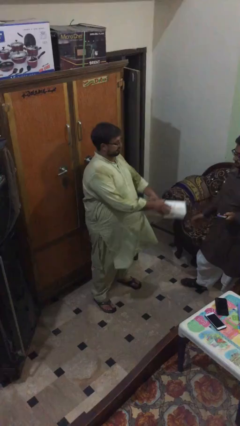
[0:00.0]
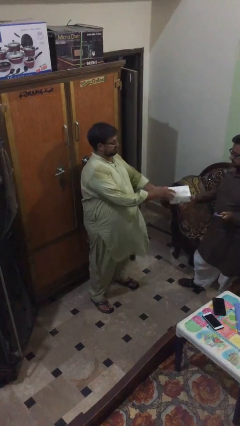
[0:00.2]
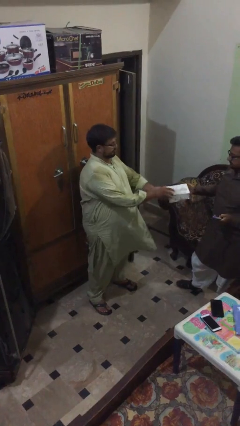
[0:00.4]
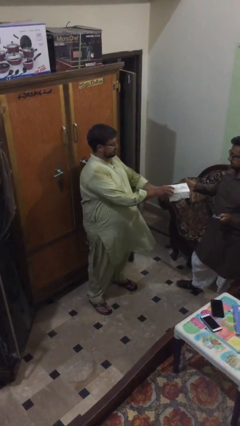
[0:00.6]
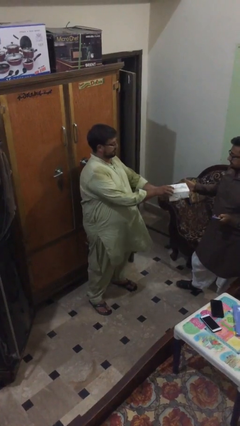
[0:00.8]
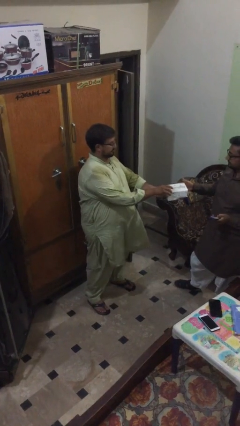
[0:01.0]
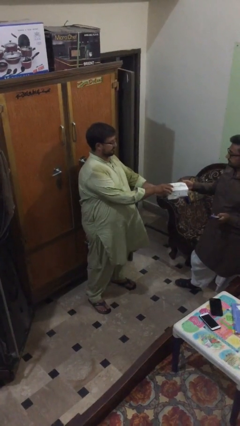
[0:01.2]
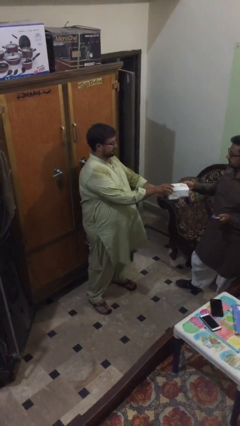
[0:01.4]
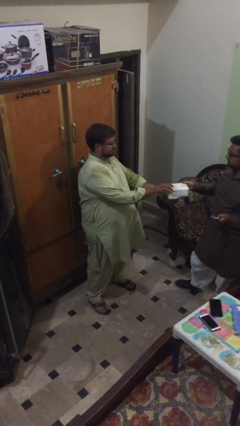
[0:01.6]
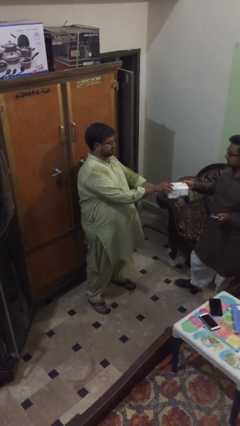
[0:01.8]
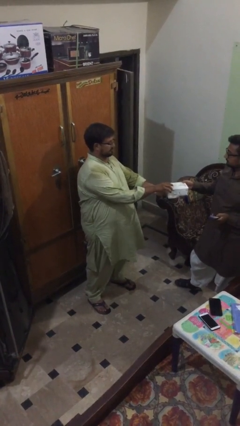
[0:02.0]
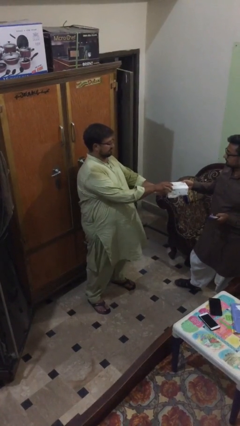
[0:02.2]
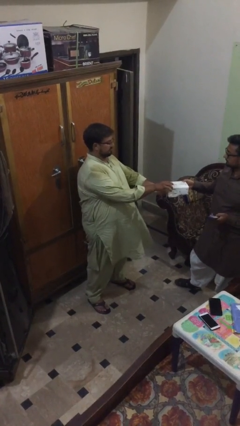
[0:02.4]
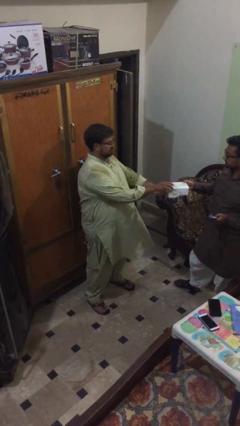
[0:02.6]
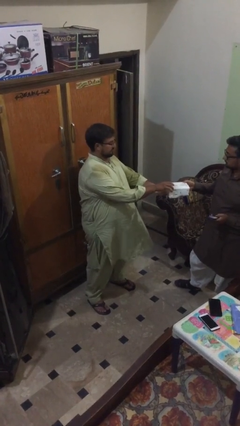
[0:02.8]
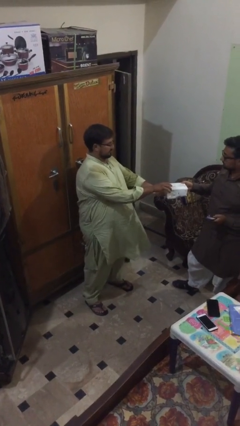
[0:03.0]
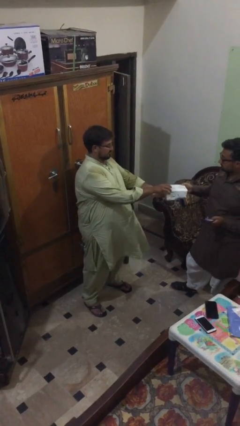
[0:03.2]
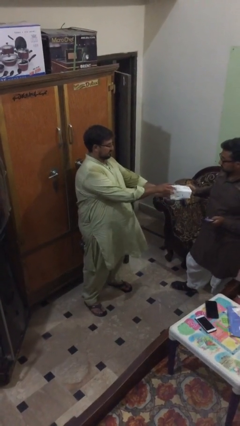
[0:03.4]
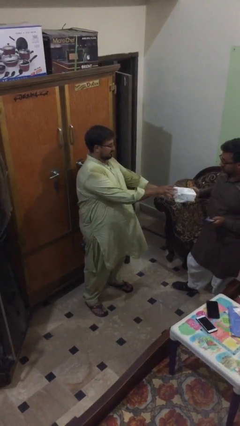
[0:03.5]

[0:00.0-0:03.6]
person transfers object to person

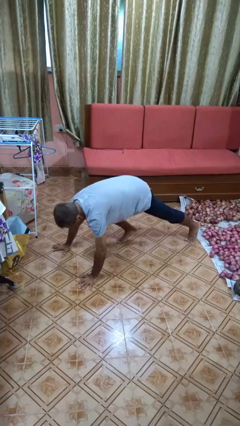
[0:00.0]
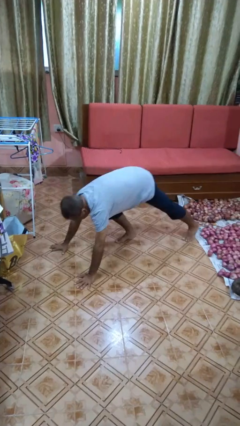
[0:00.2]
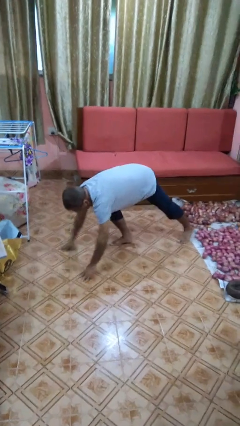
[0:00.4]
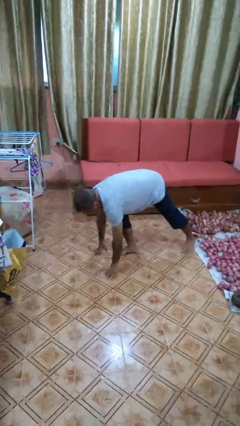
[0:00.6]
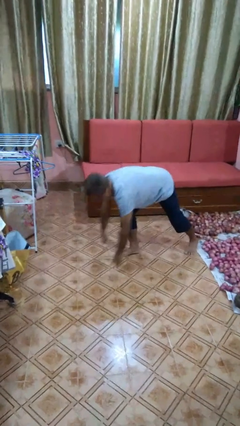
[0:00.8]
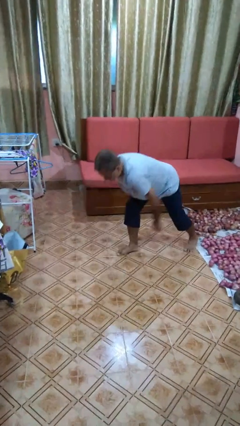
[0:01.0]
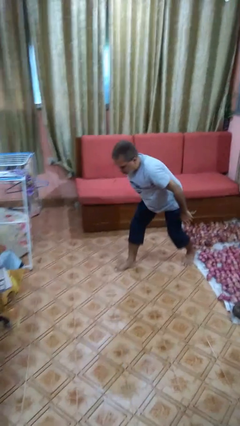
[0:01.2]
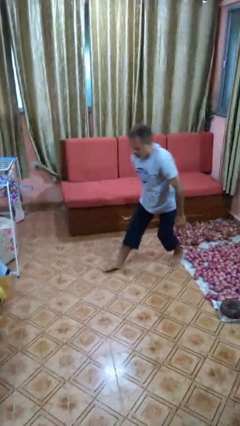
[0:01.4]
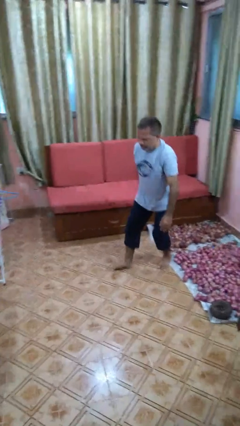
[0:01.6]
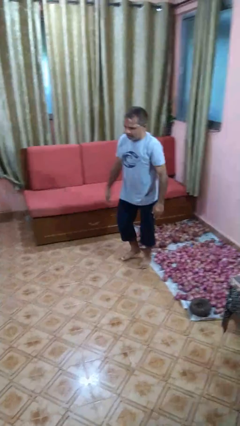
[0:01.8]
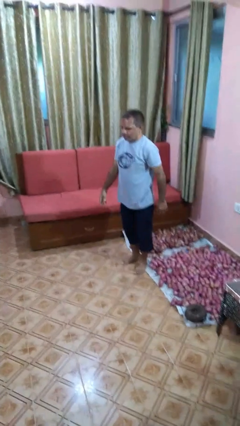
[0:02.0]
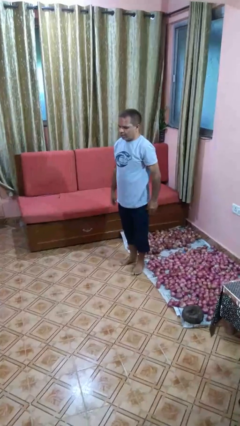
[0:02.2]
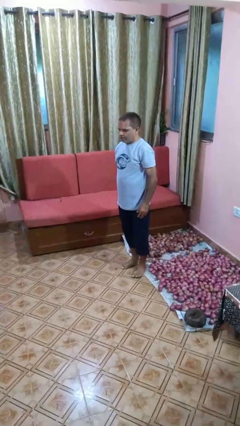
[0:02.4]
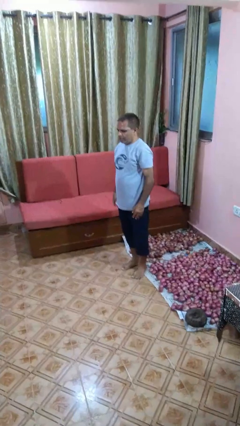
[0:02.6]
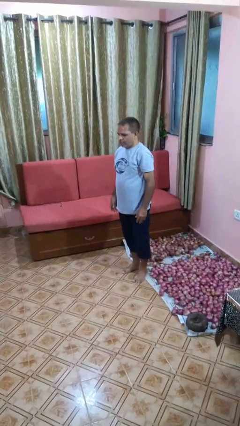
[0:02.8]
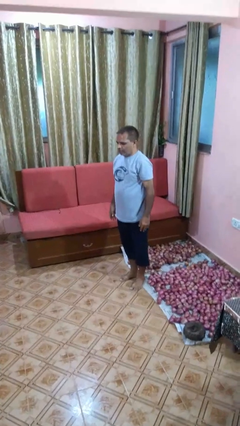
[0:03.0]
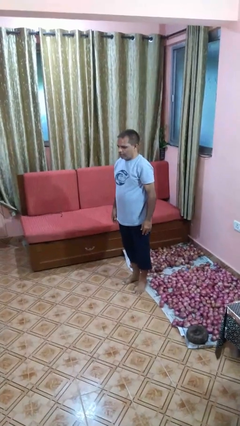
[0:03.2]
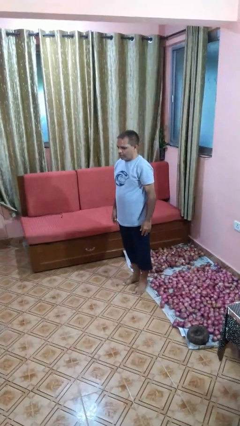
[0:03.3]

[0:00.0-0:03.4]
person stands up from floor

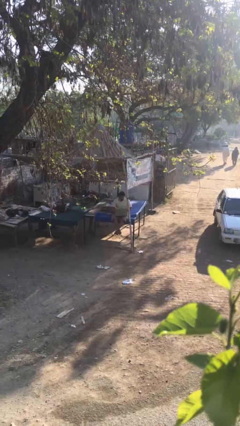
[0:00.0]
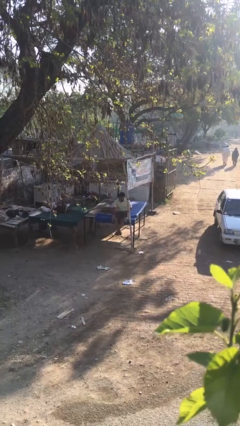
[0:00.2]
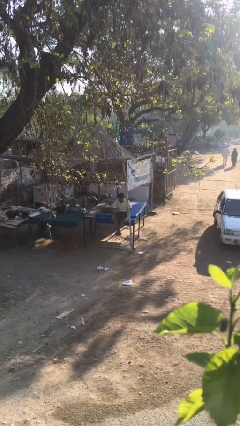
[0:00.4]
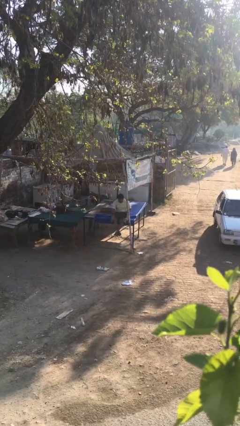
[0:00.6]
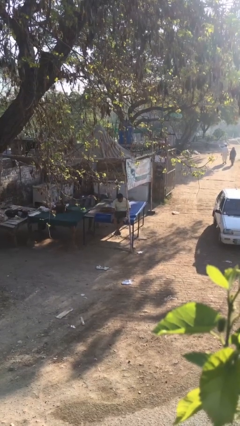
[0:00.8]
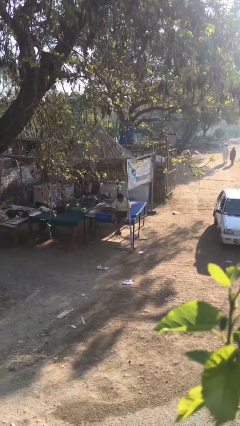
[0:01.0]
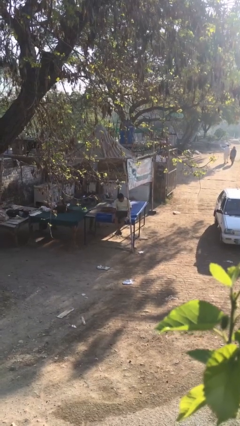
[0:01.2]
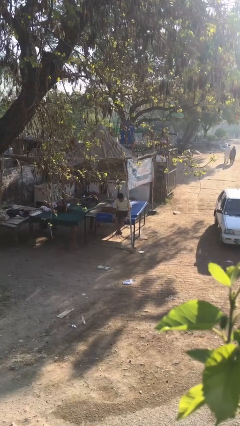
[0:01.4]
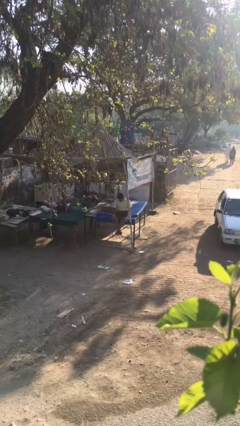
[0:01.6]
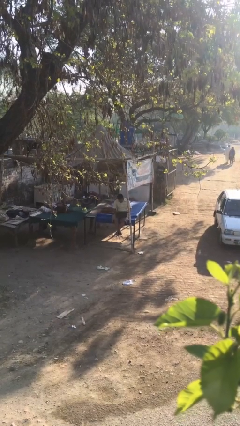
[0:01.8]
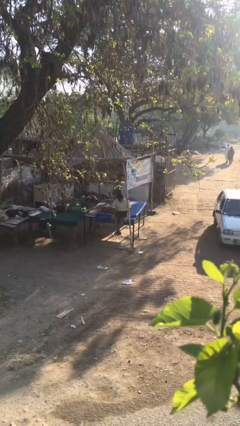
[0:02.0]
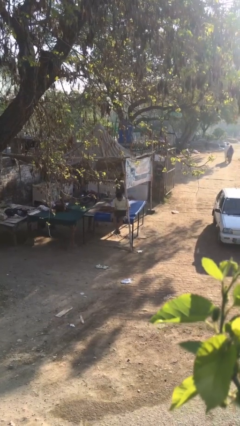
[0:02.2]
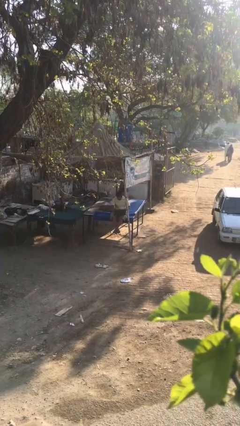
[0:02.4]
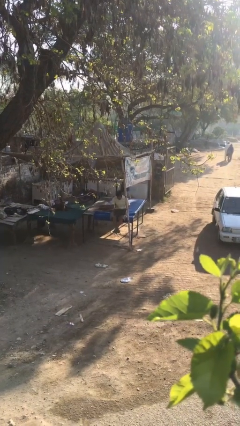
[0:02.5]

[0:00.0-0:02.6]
person interacts with laptop

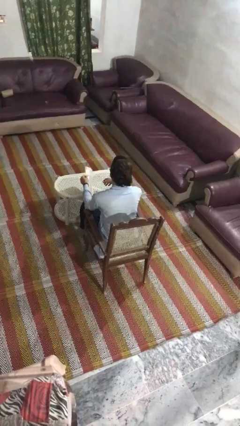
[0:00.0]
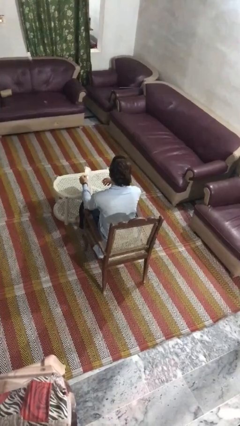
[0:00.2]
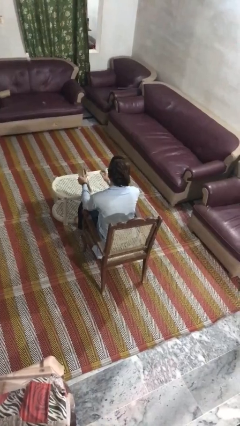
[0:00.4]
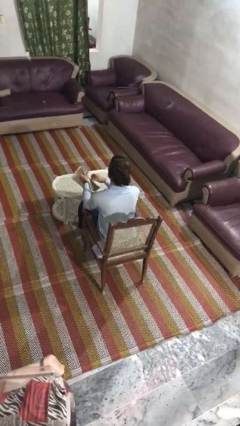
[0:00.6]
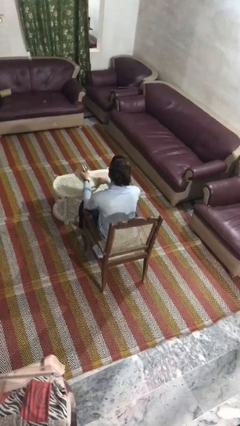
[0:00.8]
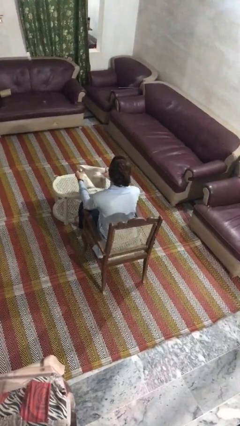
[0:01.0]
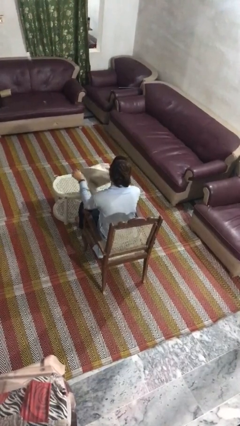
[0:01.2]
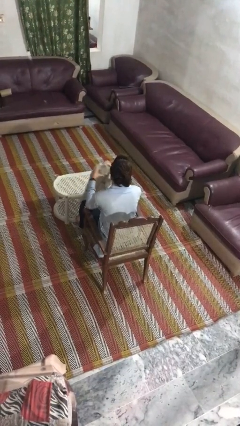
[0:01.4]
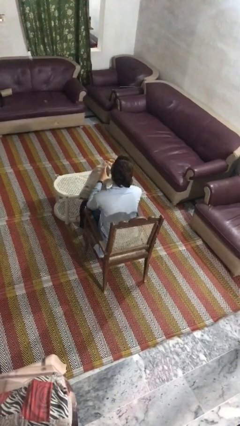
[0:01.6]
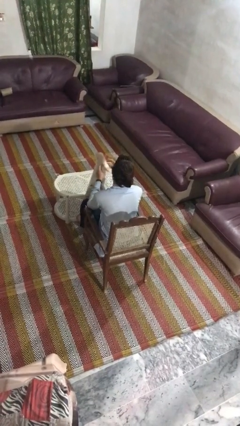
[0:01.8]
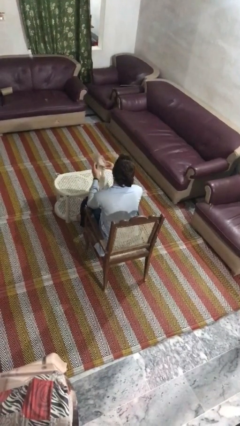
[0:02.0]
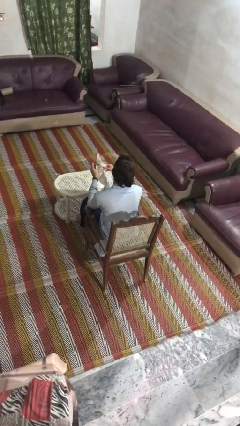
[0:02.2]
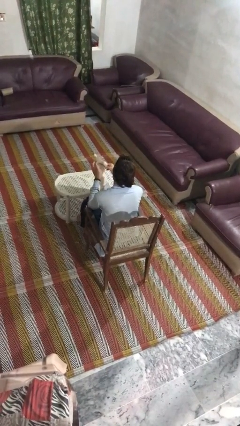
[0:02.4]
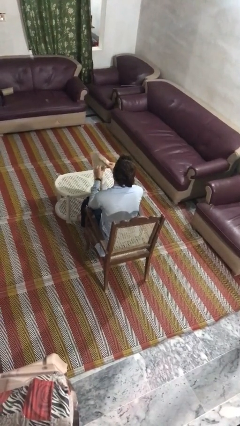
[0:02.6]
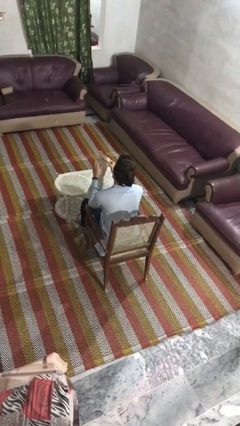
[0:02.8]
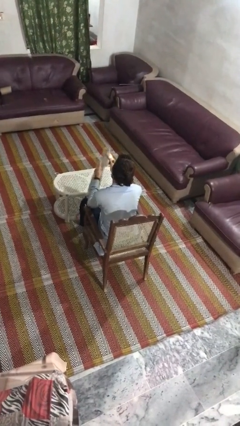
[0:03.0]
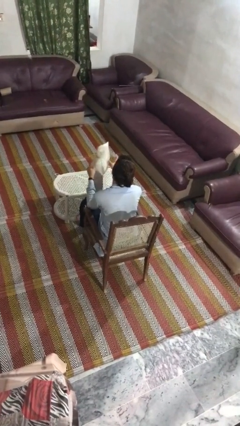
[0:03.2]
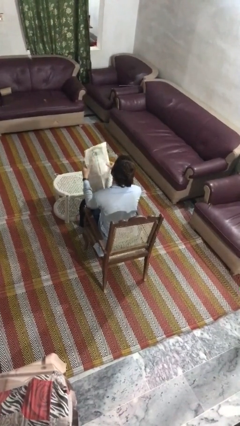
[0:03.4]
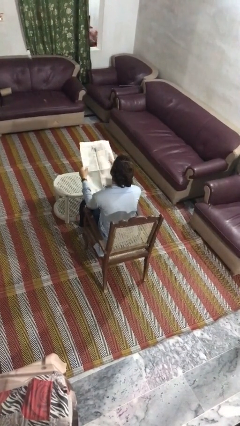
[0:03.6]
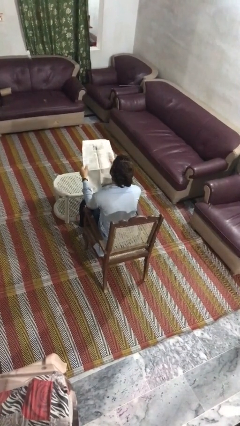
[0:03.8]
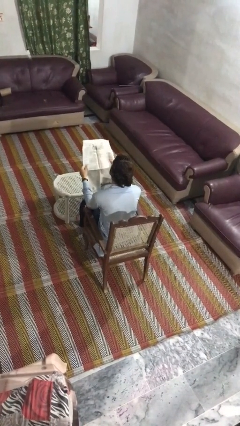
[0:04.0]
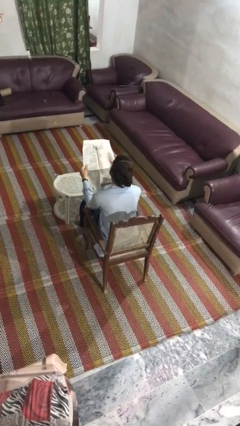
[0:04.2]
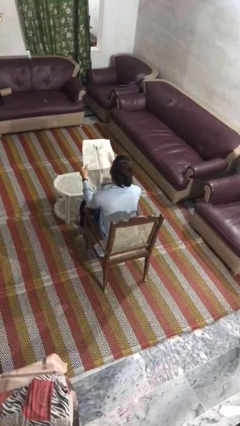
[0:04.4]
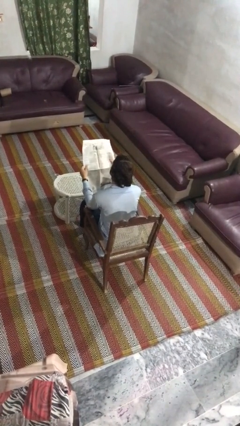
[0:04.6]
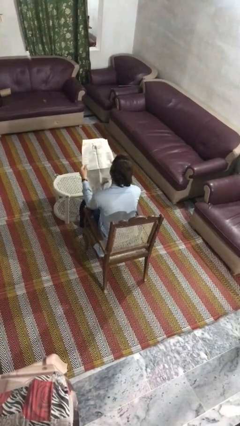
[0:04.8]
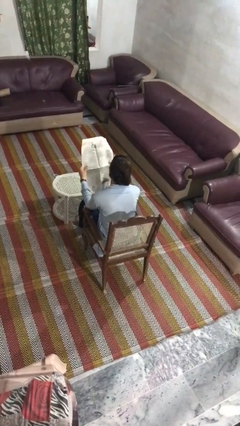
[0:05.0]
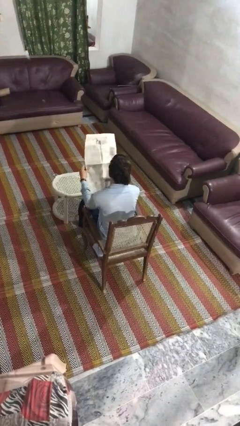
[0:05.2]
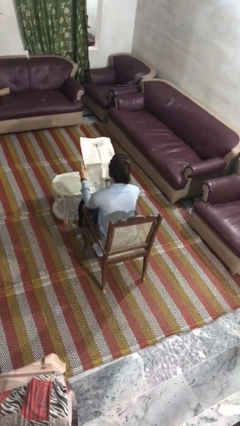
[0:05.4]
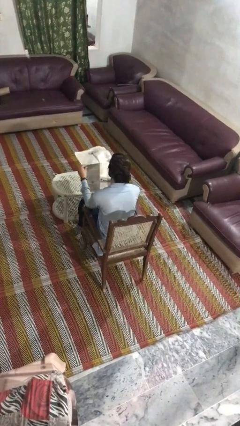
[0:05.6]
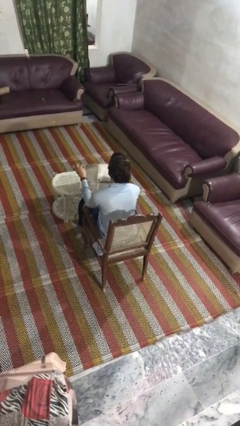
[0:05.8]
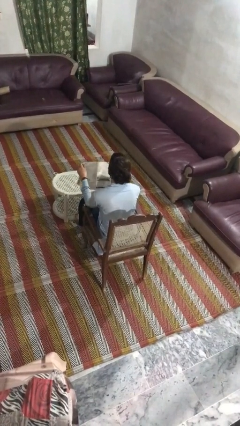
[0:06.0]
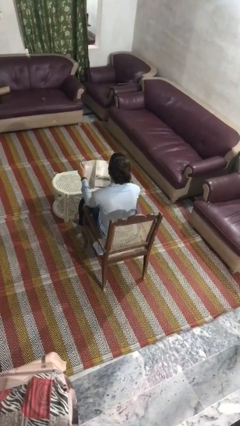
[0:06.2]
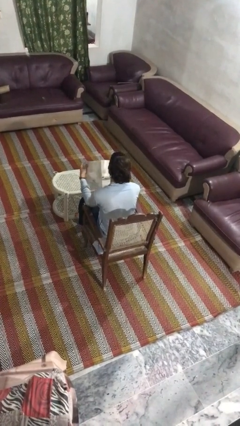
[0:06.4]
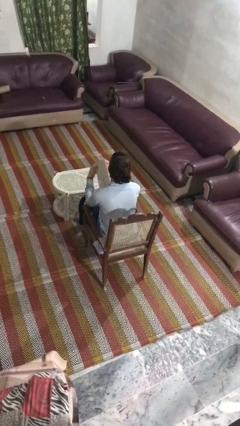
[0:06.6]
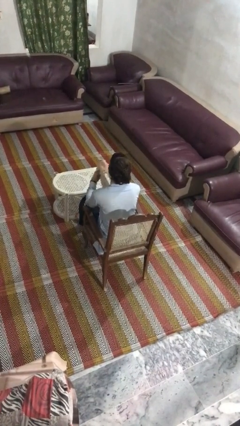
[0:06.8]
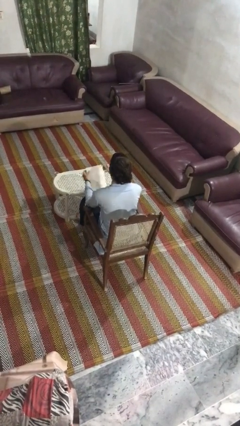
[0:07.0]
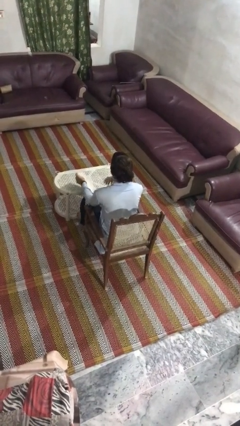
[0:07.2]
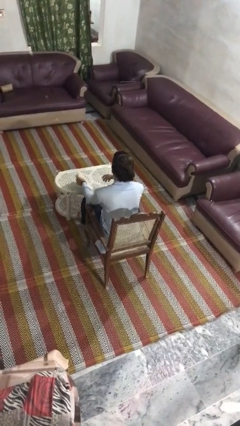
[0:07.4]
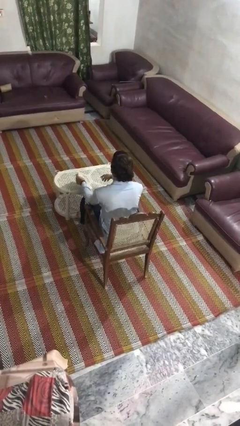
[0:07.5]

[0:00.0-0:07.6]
person reads newspaper

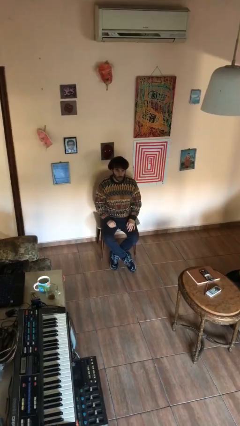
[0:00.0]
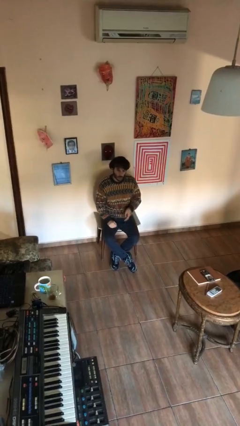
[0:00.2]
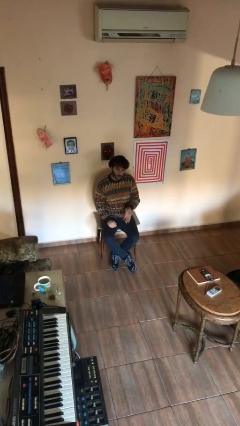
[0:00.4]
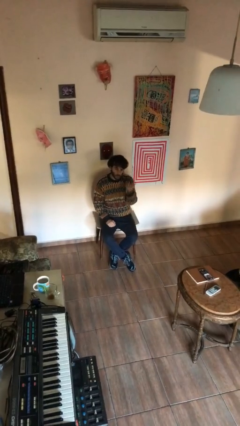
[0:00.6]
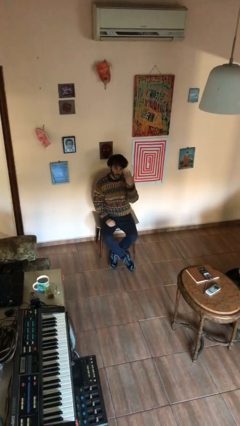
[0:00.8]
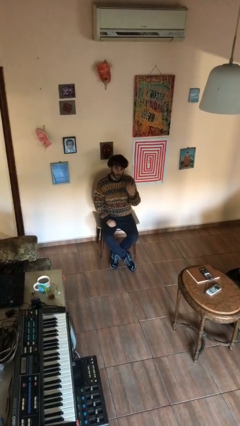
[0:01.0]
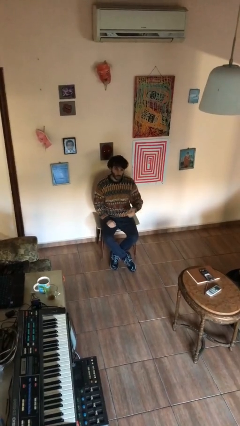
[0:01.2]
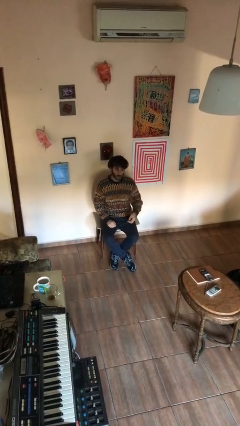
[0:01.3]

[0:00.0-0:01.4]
person gestures swipe up
